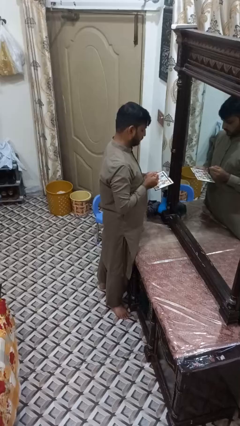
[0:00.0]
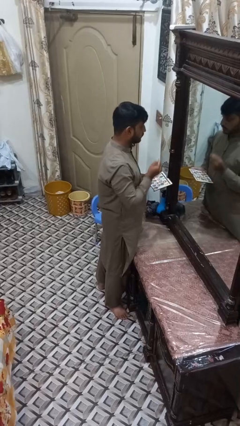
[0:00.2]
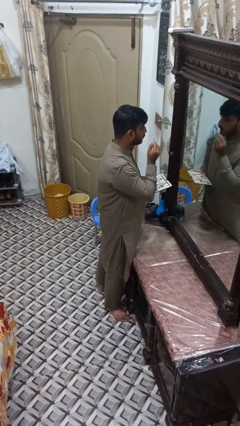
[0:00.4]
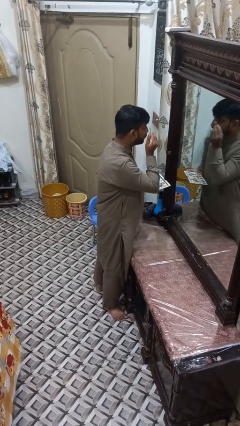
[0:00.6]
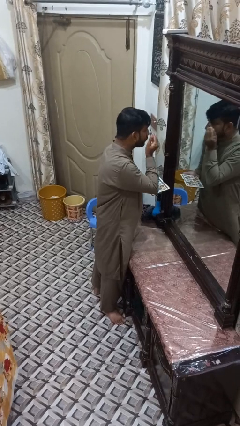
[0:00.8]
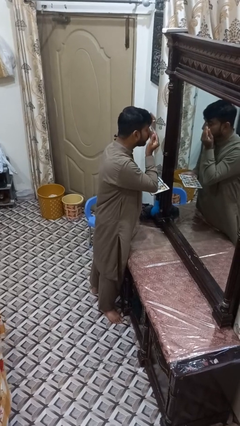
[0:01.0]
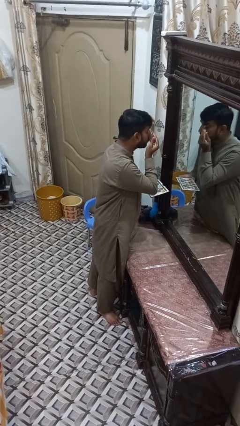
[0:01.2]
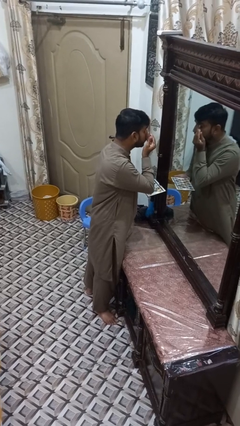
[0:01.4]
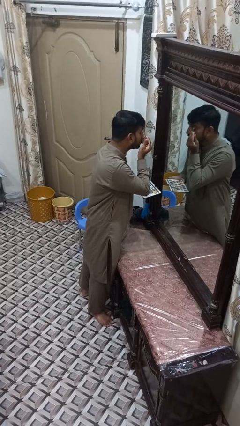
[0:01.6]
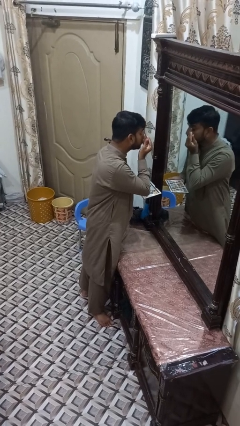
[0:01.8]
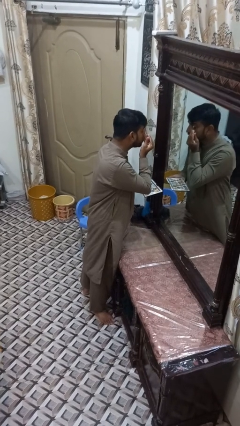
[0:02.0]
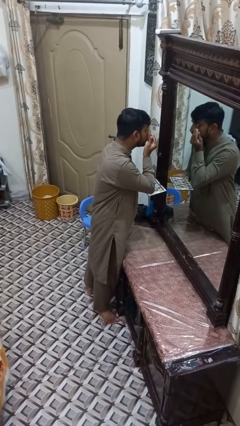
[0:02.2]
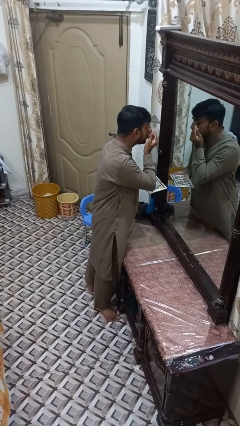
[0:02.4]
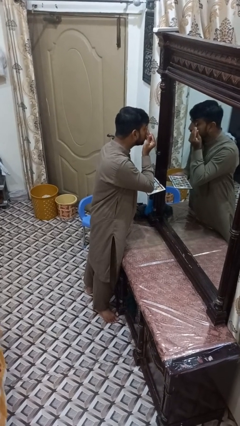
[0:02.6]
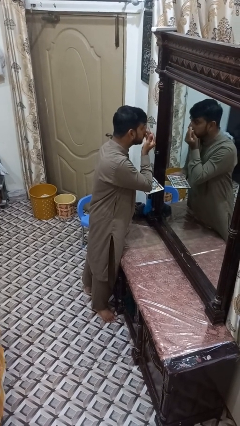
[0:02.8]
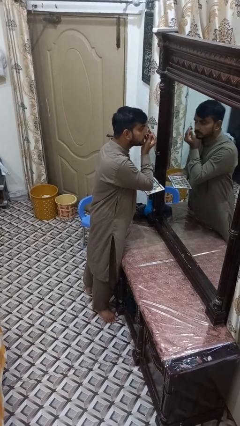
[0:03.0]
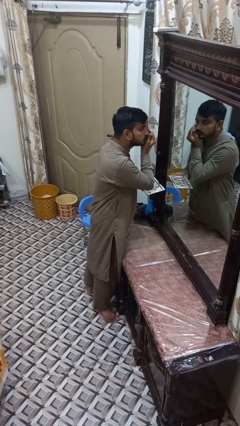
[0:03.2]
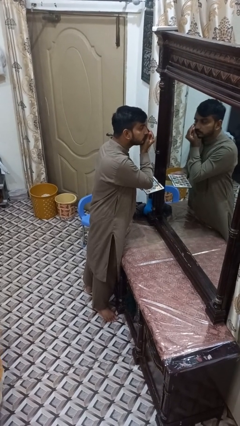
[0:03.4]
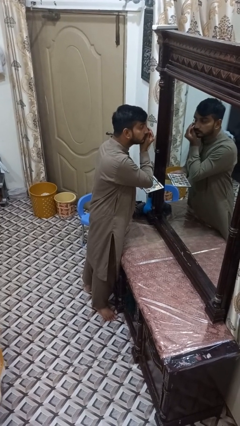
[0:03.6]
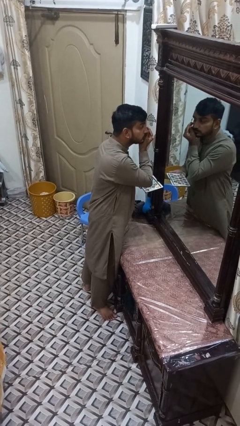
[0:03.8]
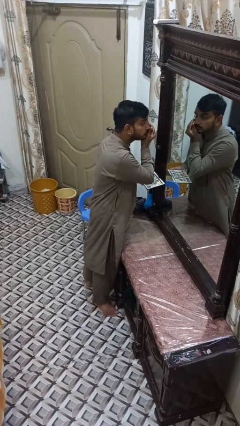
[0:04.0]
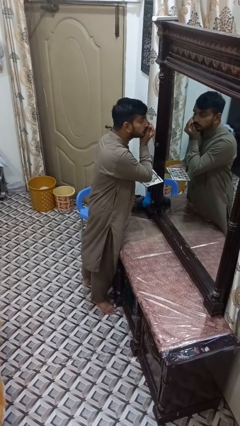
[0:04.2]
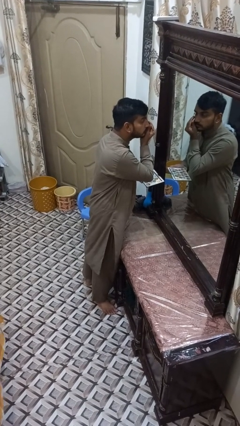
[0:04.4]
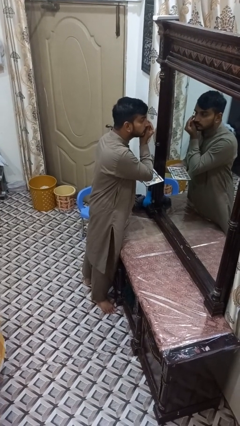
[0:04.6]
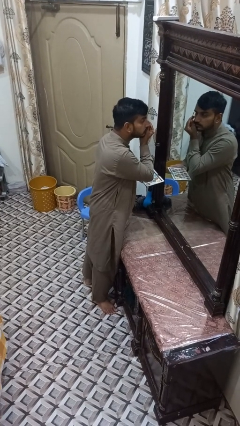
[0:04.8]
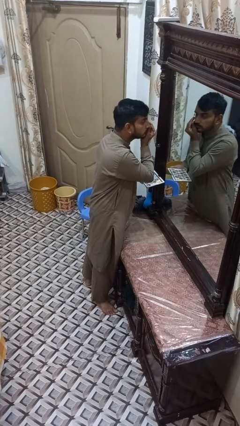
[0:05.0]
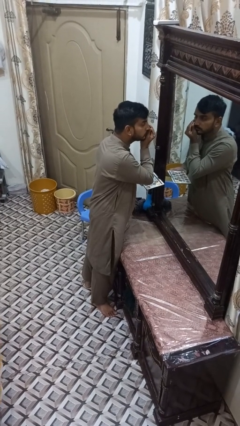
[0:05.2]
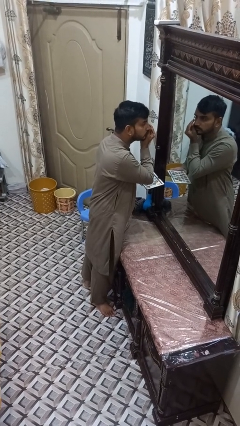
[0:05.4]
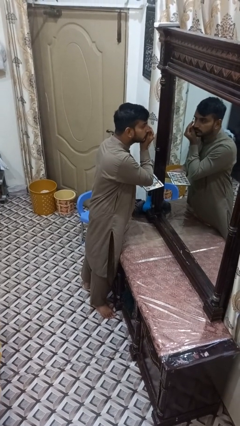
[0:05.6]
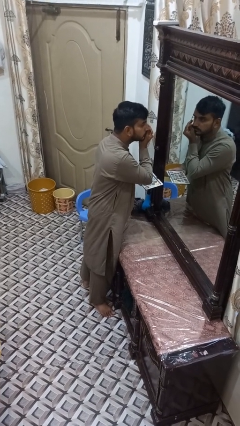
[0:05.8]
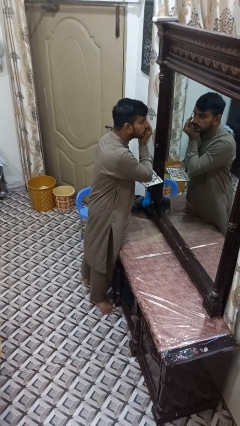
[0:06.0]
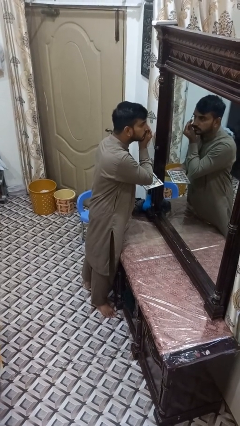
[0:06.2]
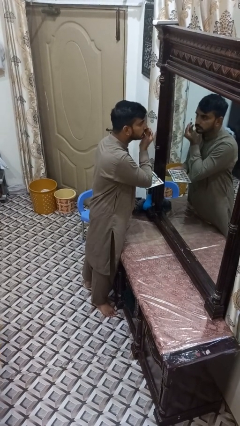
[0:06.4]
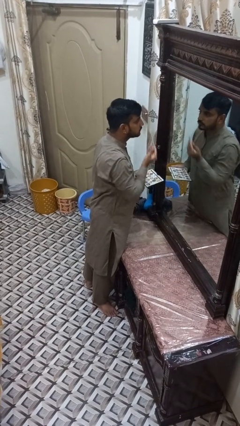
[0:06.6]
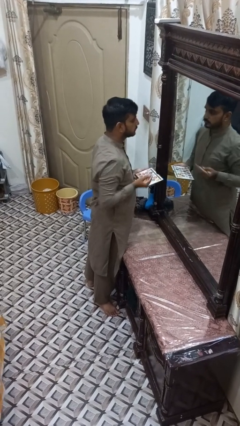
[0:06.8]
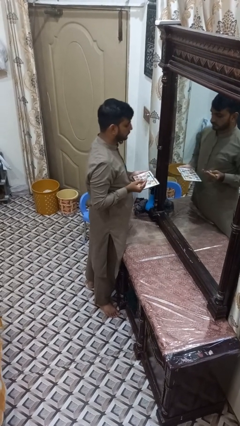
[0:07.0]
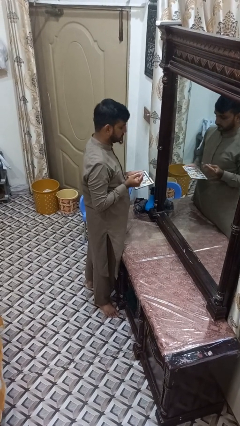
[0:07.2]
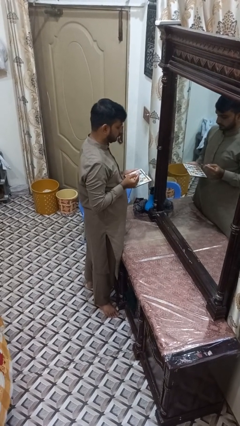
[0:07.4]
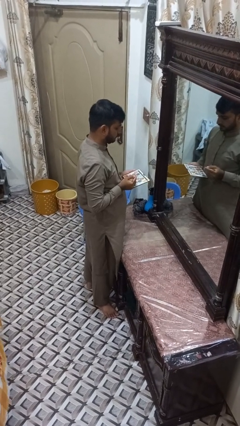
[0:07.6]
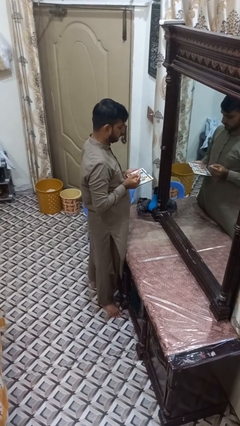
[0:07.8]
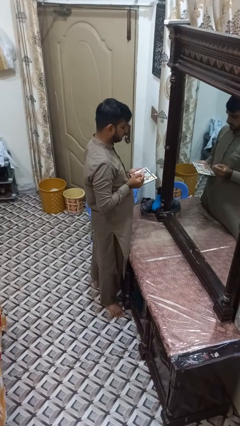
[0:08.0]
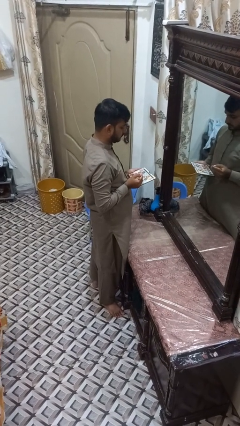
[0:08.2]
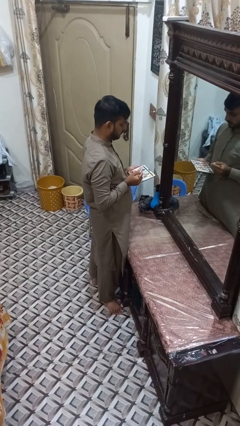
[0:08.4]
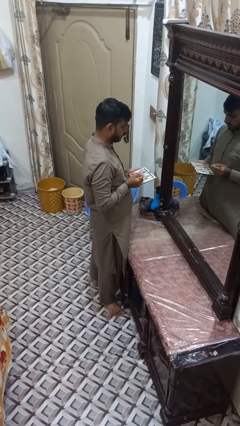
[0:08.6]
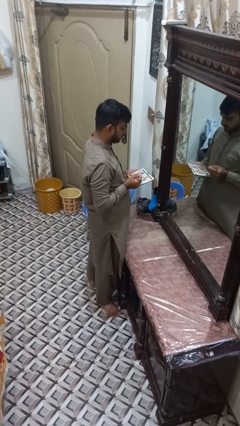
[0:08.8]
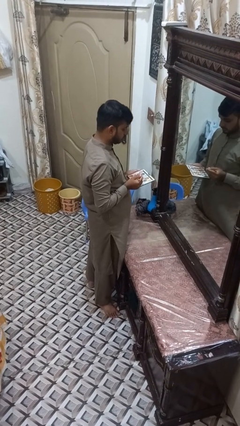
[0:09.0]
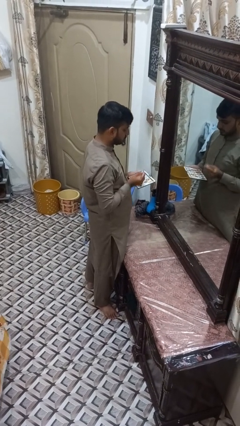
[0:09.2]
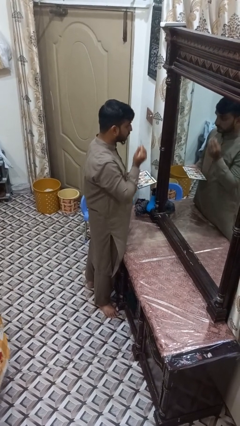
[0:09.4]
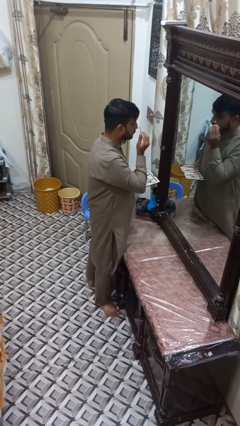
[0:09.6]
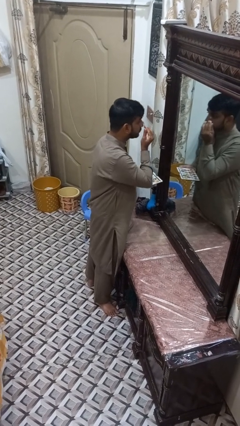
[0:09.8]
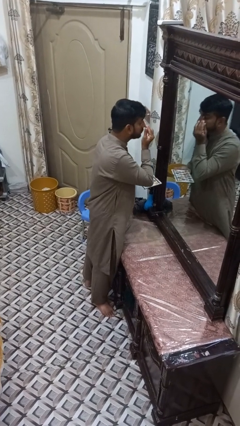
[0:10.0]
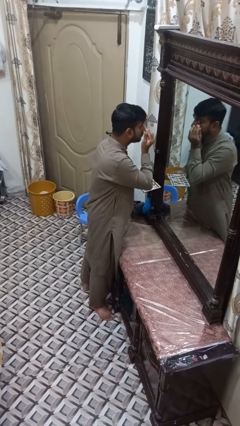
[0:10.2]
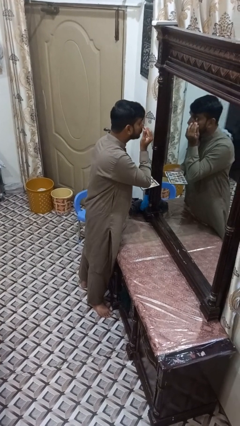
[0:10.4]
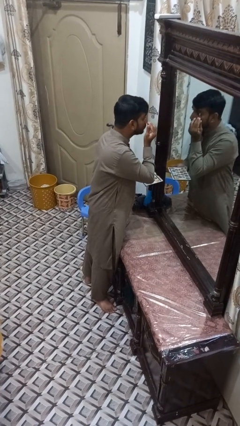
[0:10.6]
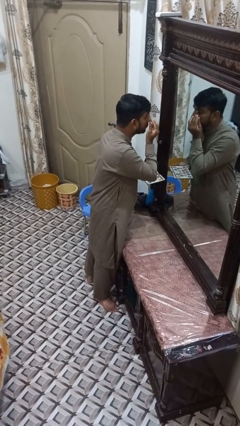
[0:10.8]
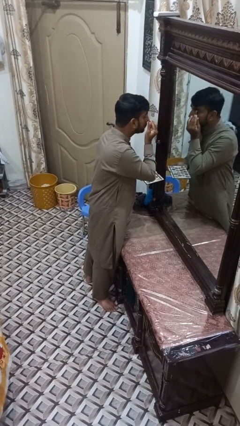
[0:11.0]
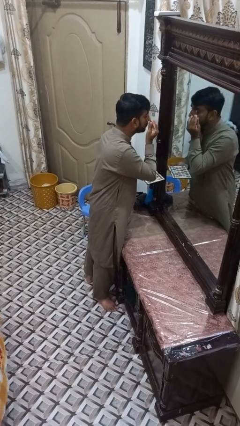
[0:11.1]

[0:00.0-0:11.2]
person applies eye makeup

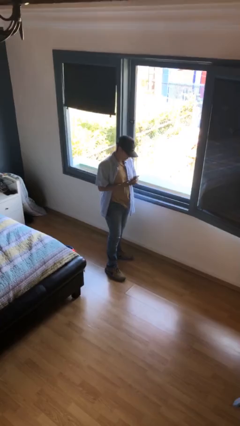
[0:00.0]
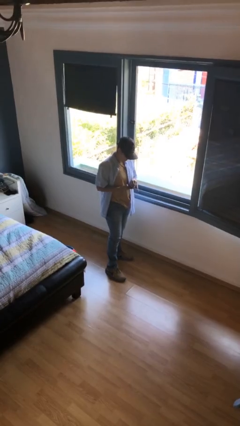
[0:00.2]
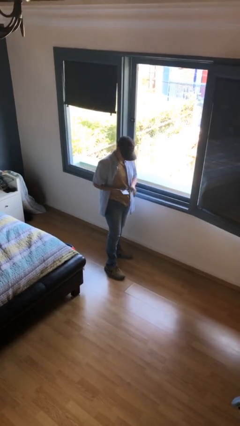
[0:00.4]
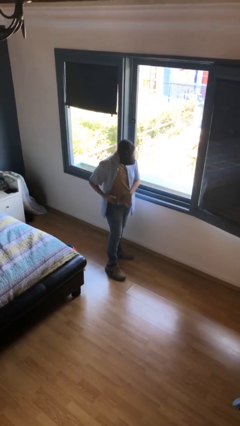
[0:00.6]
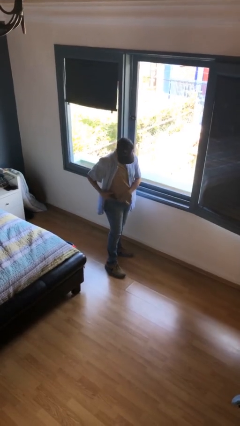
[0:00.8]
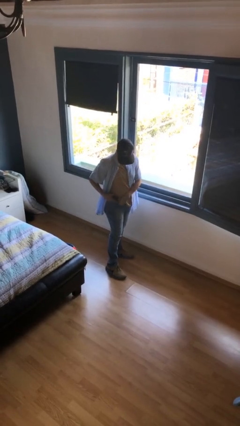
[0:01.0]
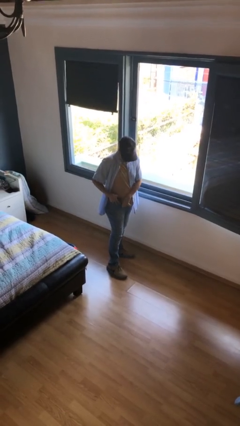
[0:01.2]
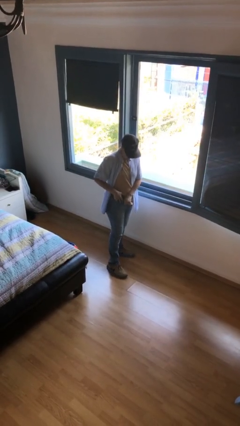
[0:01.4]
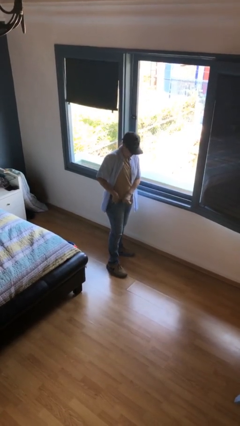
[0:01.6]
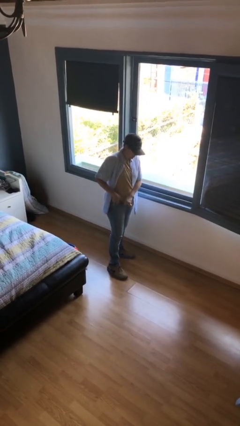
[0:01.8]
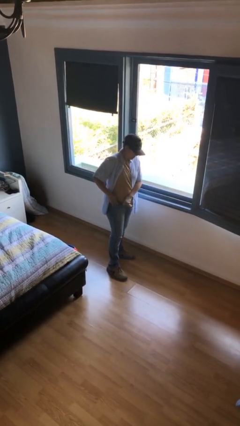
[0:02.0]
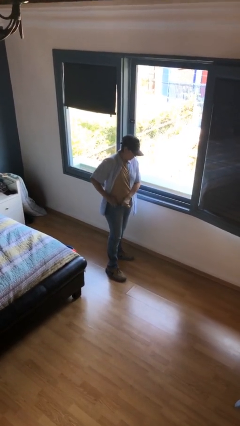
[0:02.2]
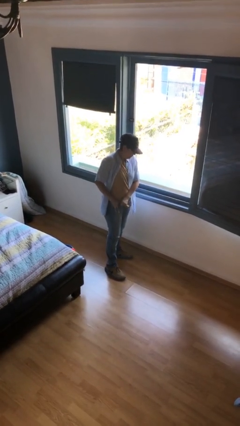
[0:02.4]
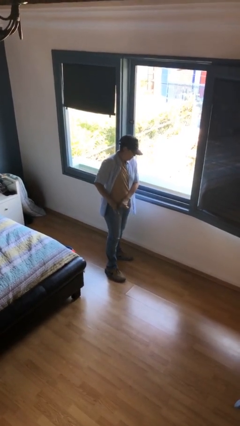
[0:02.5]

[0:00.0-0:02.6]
person puts phone into pocket

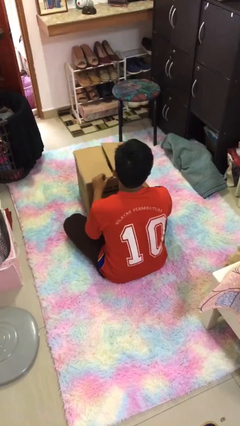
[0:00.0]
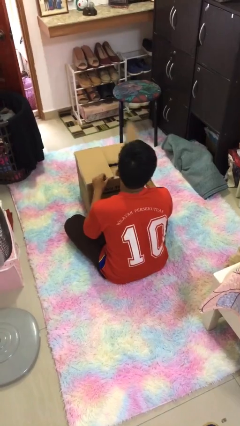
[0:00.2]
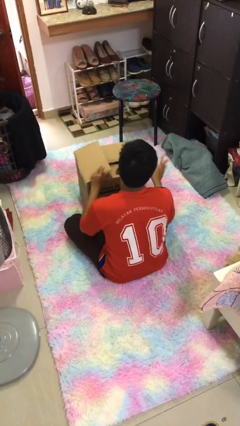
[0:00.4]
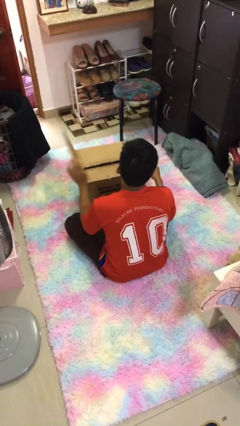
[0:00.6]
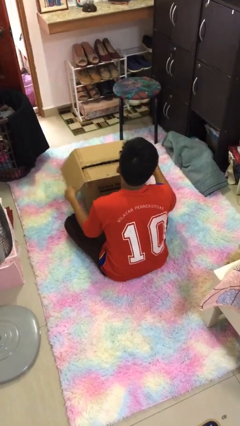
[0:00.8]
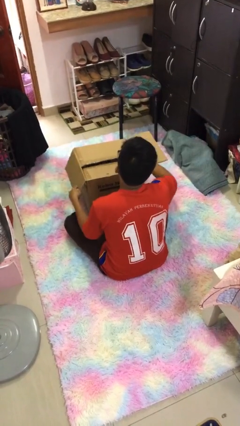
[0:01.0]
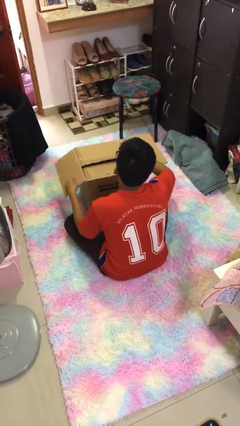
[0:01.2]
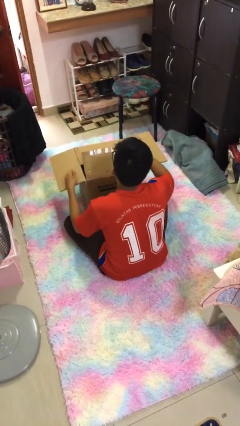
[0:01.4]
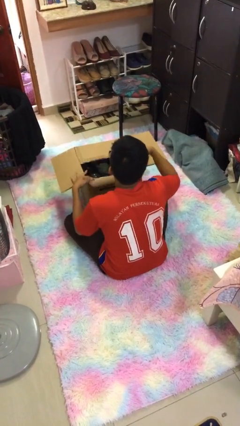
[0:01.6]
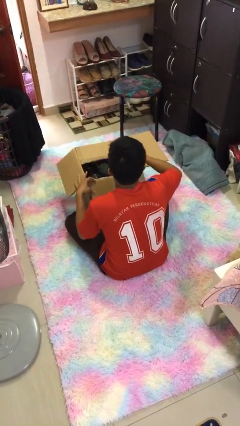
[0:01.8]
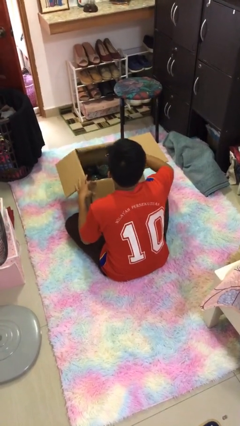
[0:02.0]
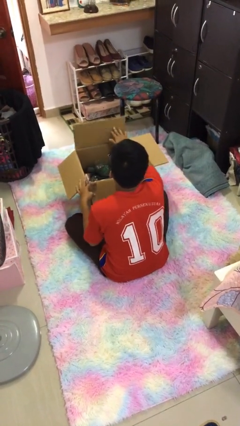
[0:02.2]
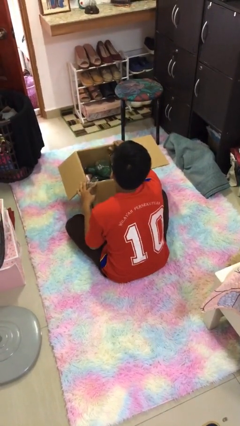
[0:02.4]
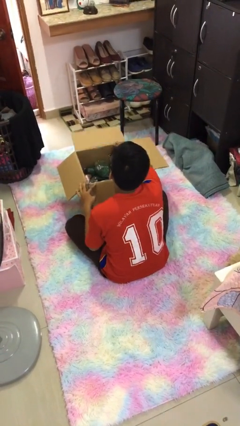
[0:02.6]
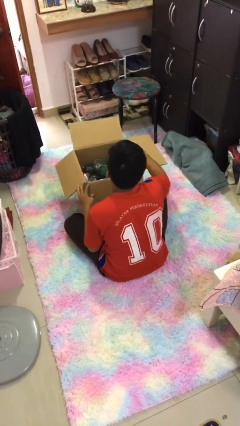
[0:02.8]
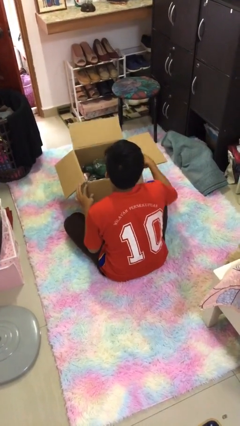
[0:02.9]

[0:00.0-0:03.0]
person opens box

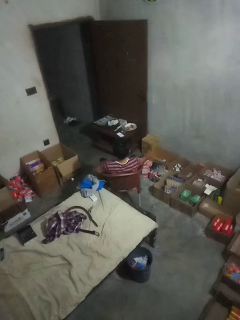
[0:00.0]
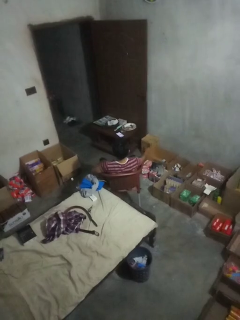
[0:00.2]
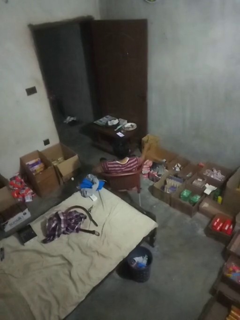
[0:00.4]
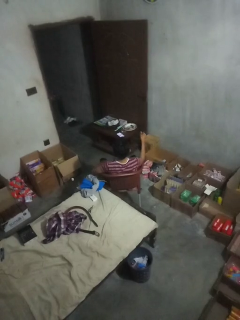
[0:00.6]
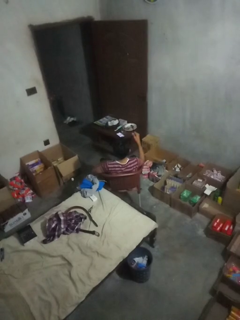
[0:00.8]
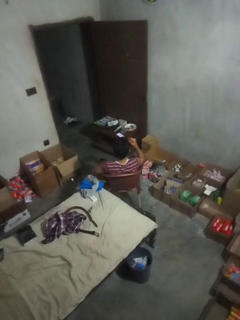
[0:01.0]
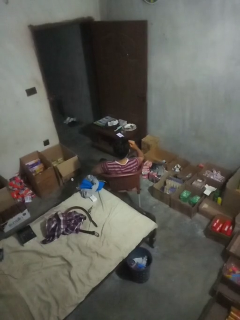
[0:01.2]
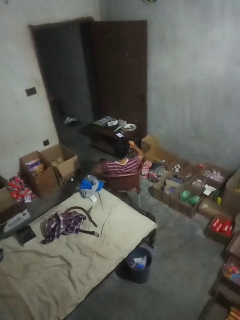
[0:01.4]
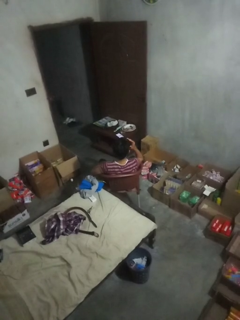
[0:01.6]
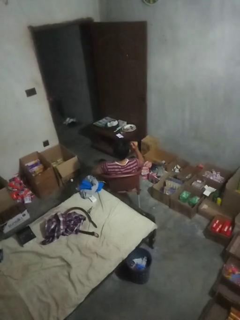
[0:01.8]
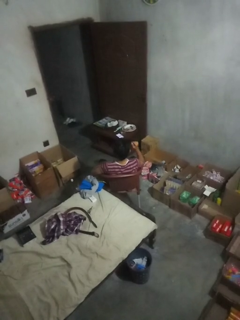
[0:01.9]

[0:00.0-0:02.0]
person puts on sunglasses
